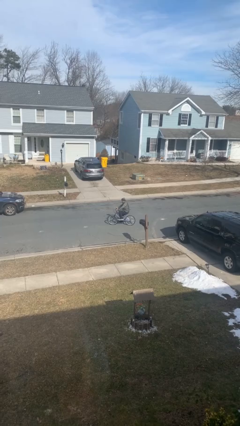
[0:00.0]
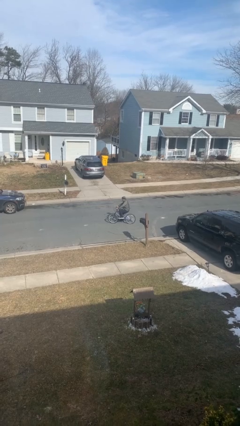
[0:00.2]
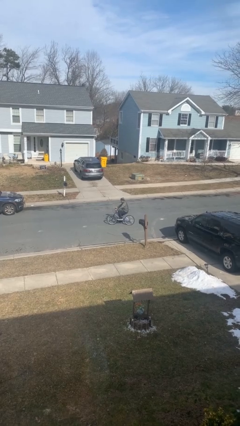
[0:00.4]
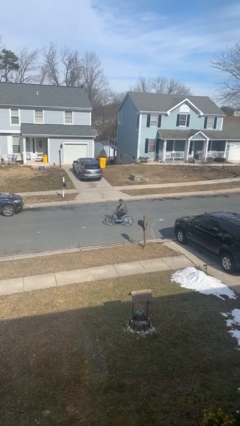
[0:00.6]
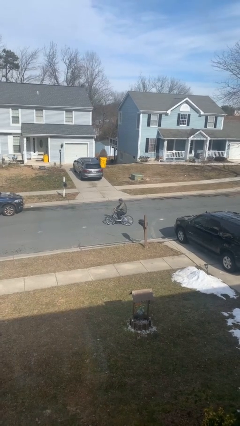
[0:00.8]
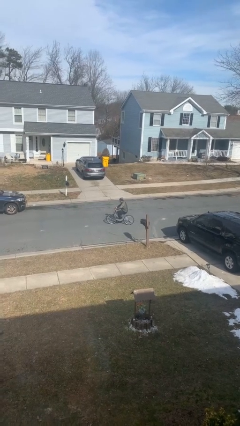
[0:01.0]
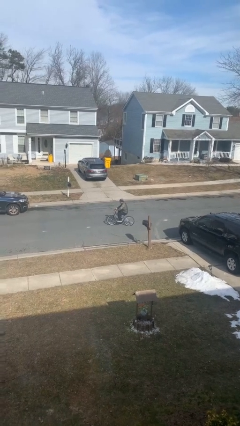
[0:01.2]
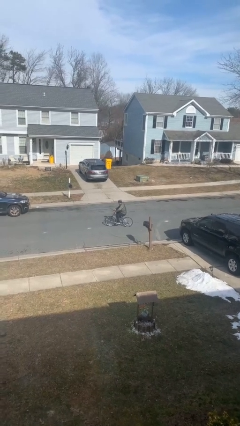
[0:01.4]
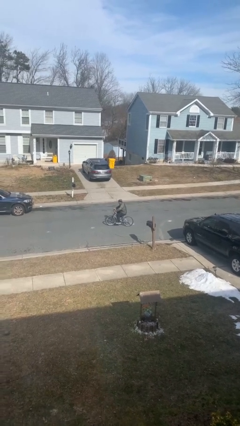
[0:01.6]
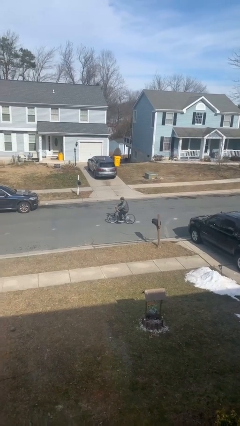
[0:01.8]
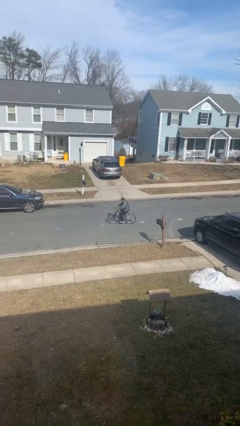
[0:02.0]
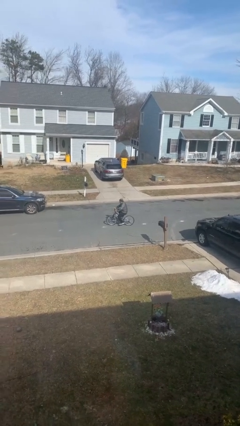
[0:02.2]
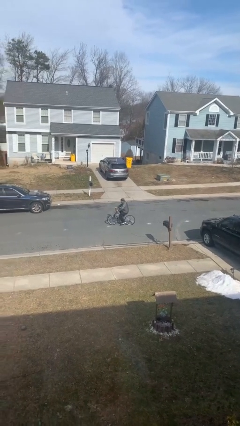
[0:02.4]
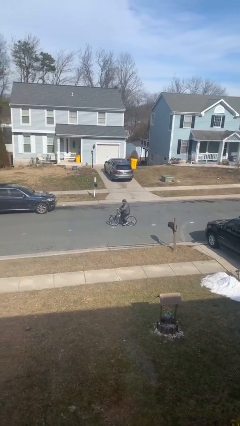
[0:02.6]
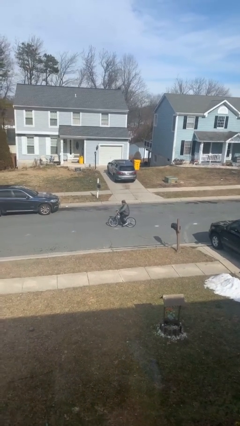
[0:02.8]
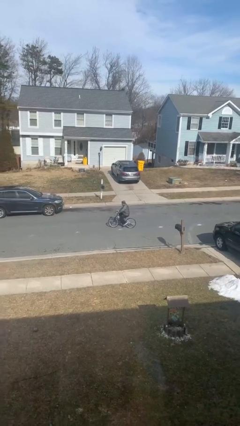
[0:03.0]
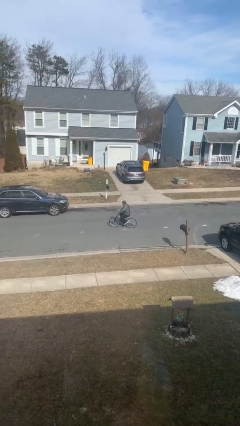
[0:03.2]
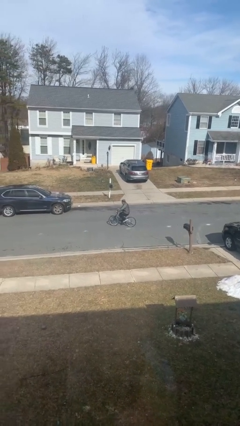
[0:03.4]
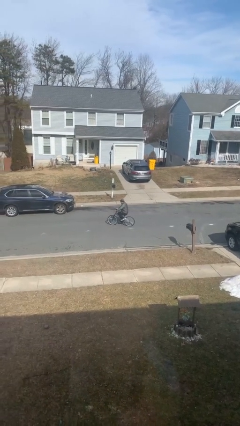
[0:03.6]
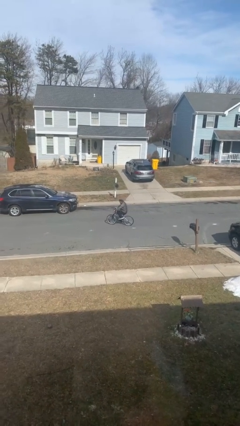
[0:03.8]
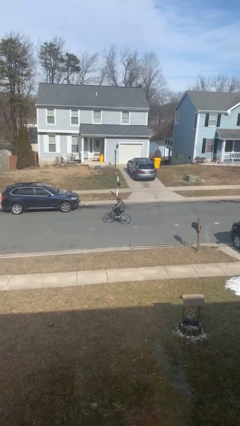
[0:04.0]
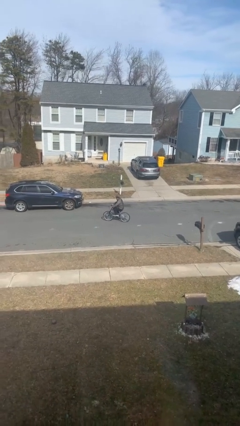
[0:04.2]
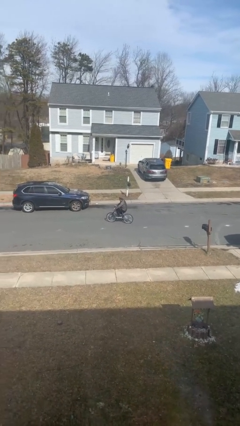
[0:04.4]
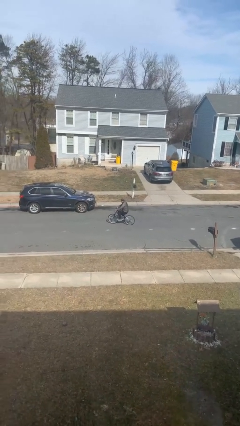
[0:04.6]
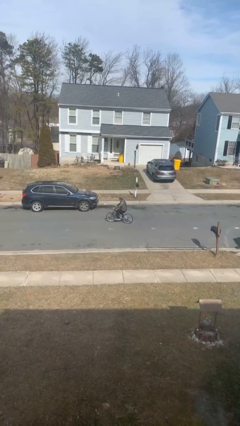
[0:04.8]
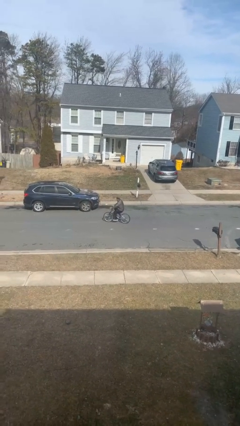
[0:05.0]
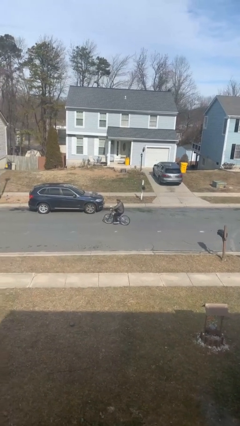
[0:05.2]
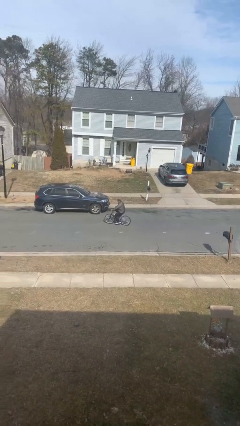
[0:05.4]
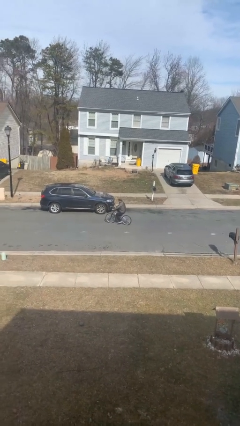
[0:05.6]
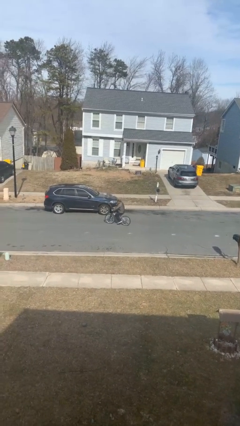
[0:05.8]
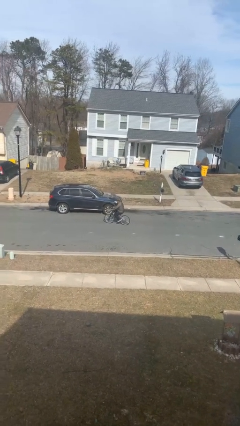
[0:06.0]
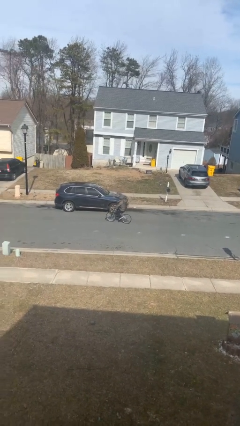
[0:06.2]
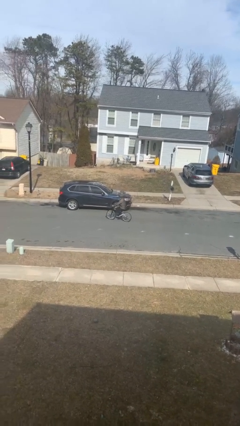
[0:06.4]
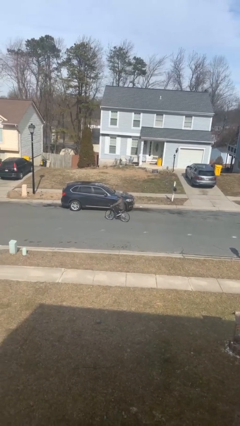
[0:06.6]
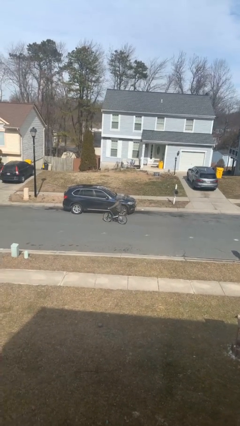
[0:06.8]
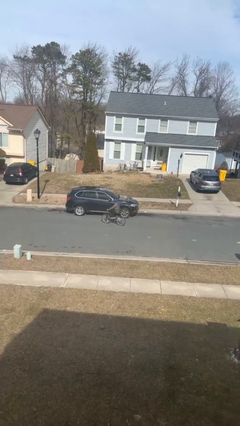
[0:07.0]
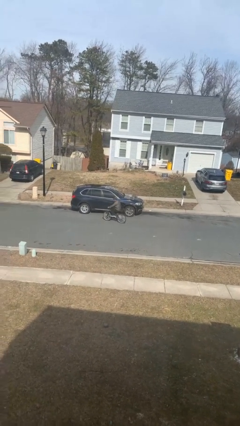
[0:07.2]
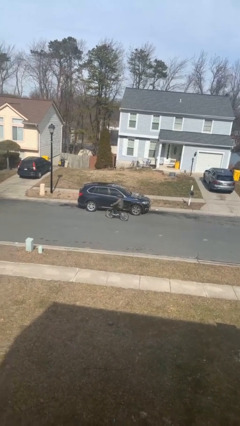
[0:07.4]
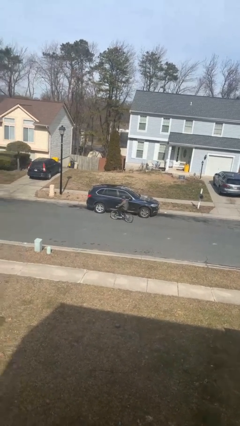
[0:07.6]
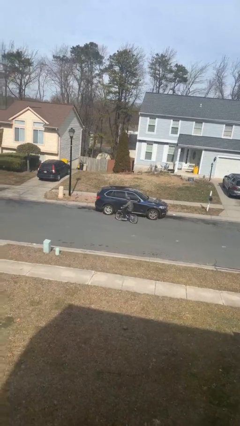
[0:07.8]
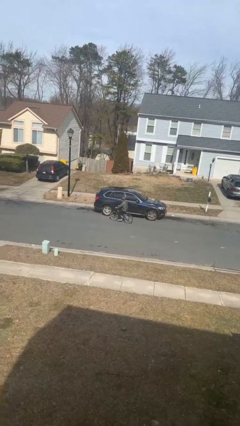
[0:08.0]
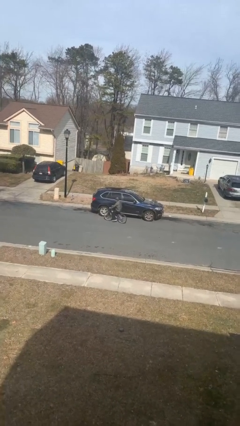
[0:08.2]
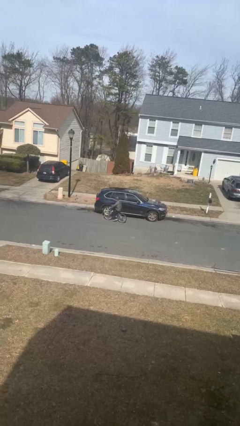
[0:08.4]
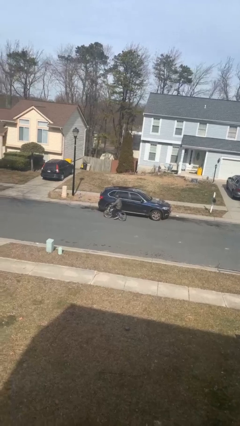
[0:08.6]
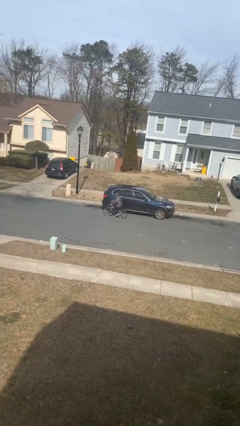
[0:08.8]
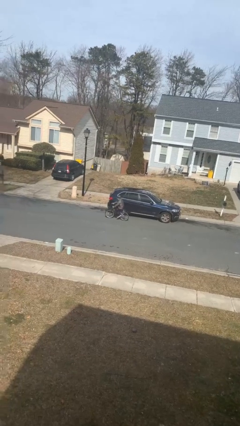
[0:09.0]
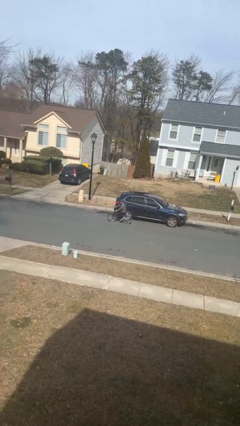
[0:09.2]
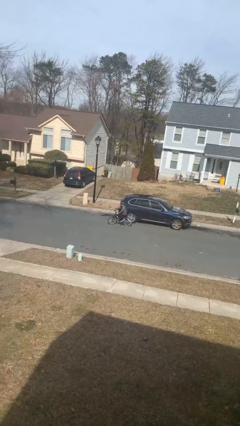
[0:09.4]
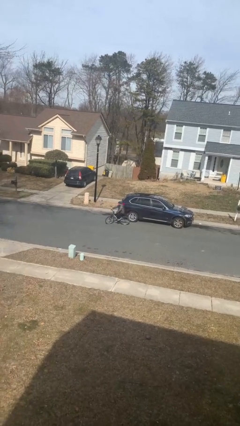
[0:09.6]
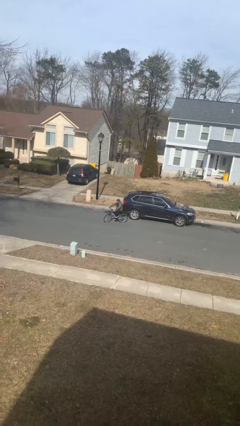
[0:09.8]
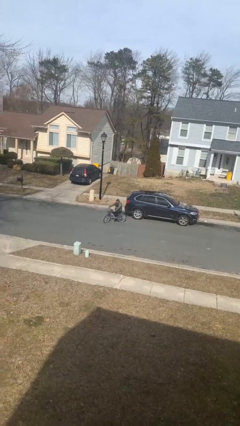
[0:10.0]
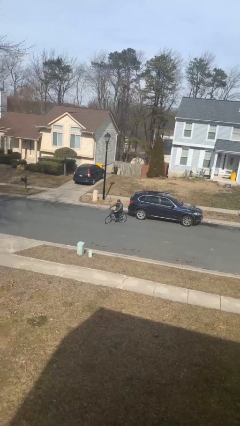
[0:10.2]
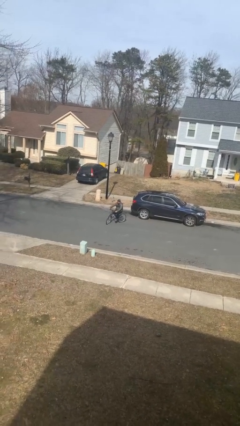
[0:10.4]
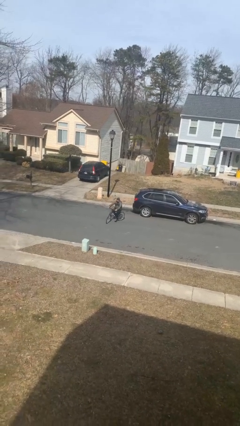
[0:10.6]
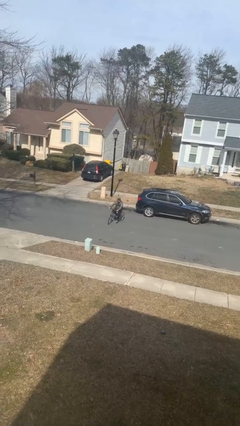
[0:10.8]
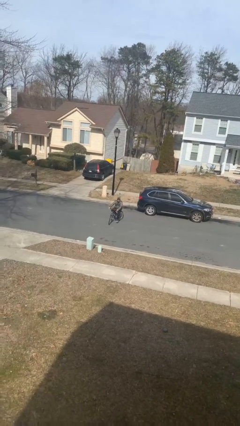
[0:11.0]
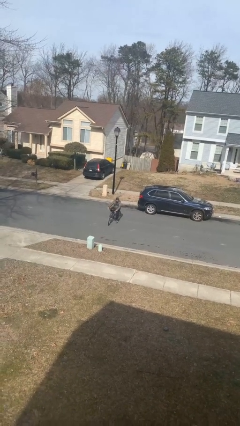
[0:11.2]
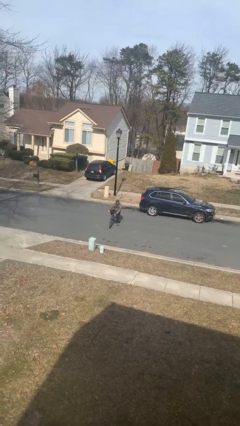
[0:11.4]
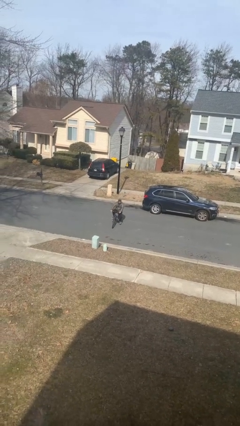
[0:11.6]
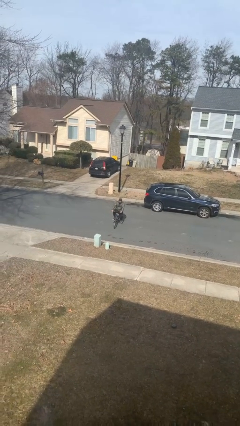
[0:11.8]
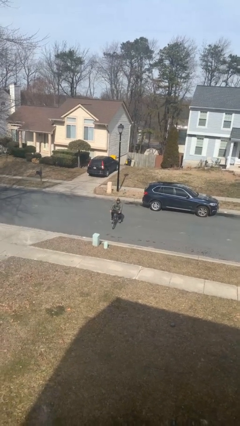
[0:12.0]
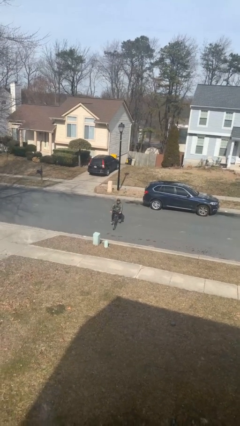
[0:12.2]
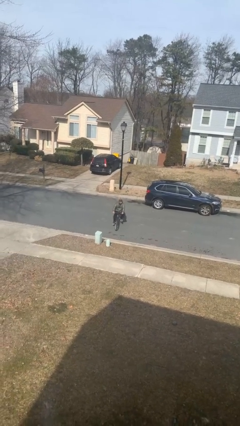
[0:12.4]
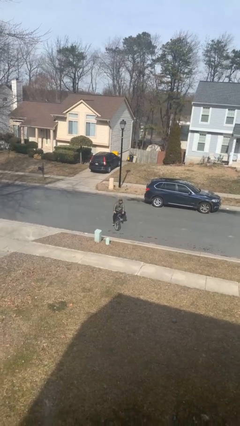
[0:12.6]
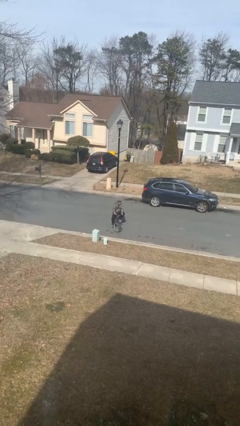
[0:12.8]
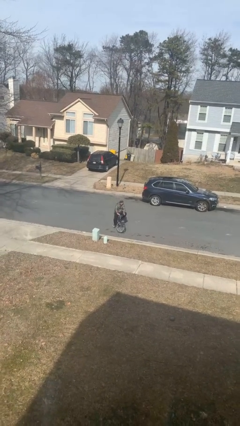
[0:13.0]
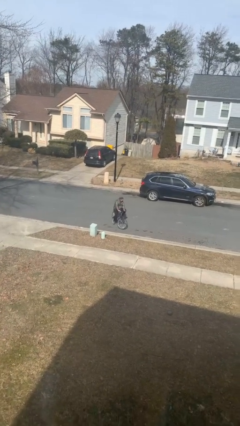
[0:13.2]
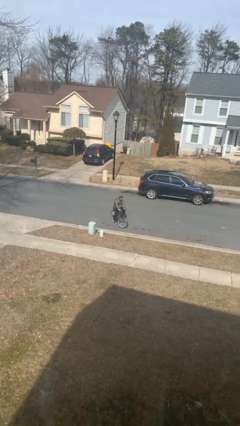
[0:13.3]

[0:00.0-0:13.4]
person rides bicycle

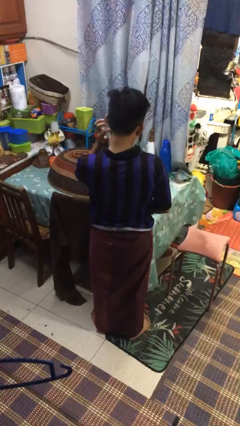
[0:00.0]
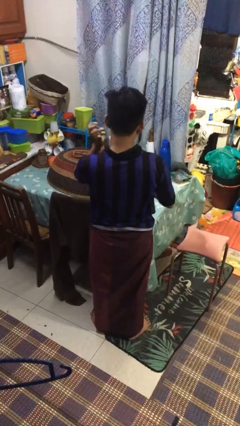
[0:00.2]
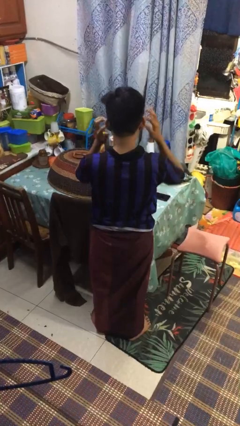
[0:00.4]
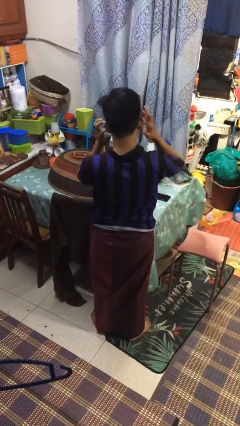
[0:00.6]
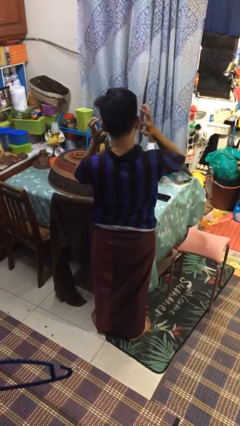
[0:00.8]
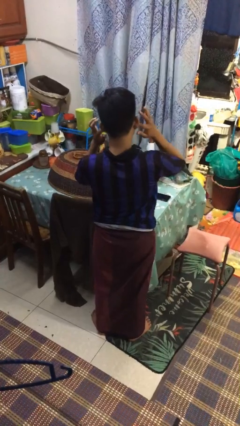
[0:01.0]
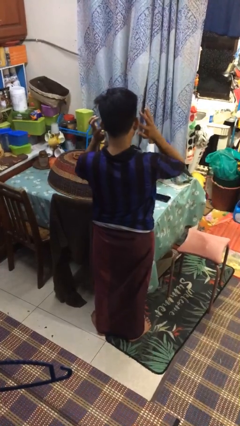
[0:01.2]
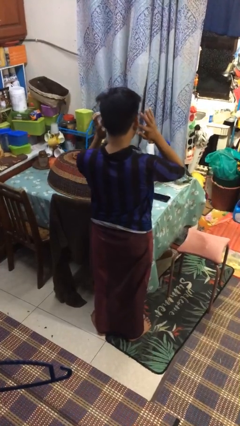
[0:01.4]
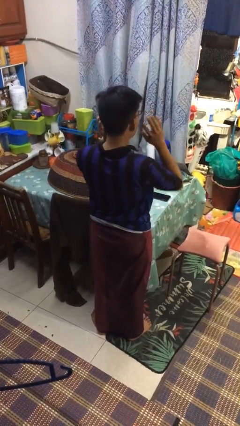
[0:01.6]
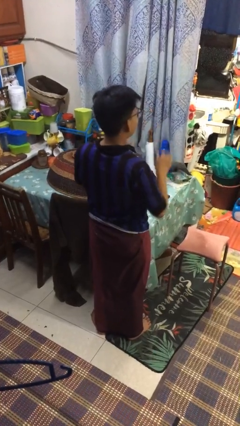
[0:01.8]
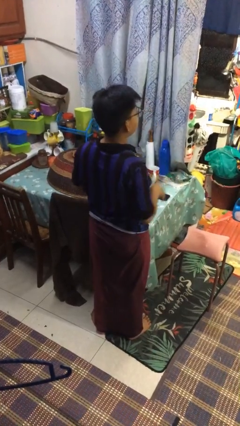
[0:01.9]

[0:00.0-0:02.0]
person puts fingers in ear

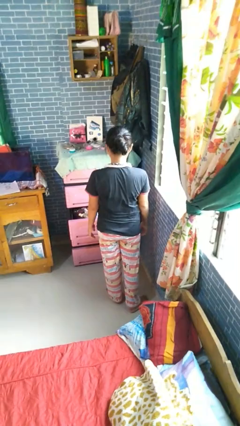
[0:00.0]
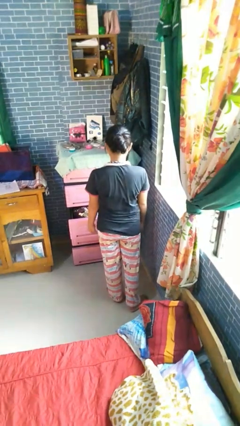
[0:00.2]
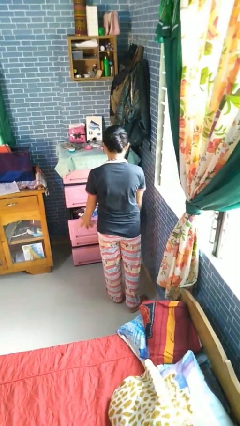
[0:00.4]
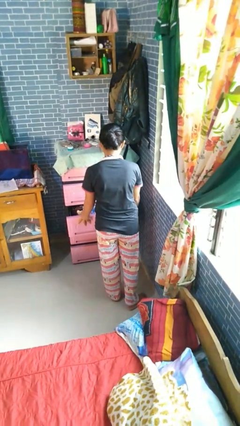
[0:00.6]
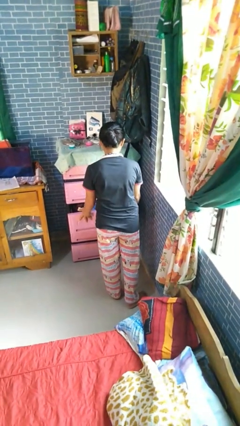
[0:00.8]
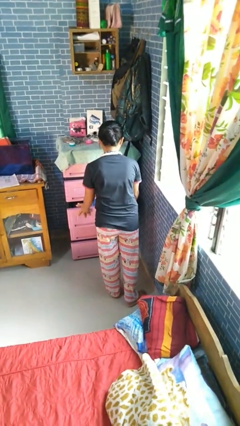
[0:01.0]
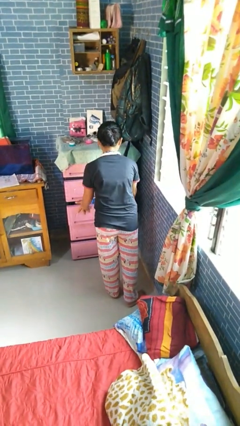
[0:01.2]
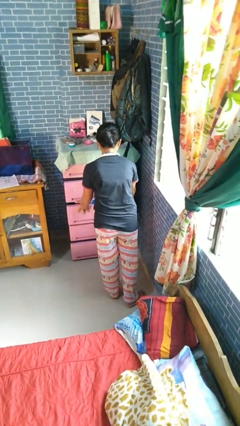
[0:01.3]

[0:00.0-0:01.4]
person closes dresser drawer

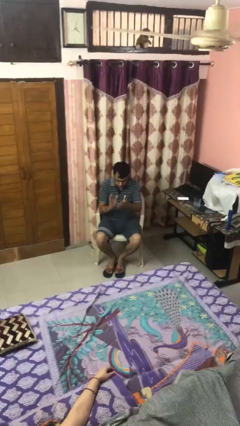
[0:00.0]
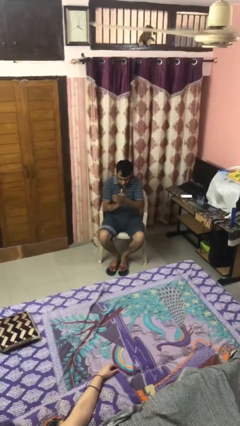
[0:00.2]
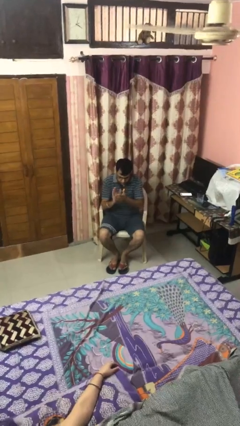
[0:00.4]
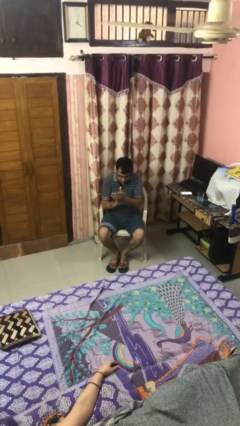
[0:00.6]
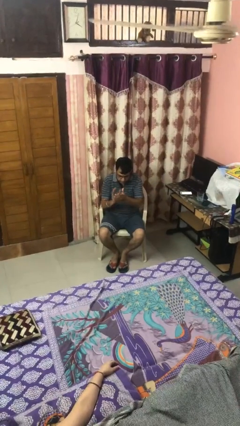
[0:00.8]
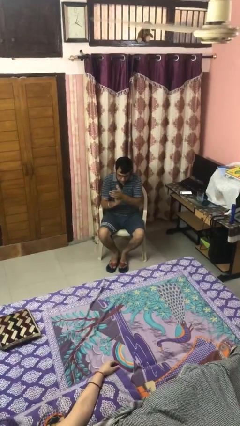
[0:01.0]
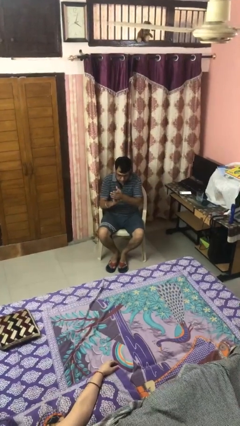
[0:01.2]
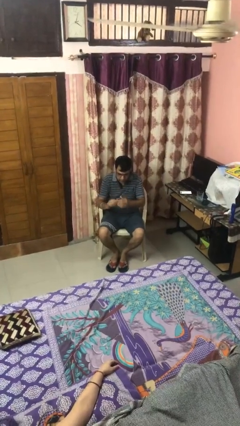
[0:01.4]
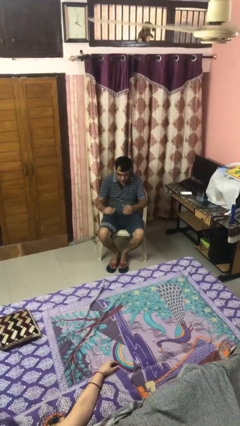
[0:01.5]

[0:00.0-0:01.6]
person claps hands
